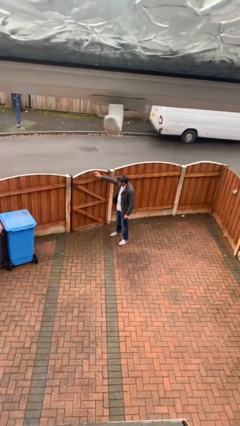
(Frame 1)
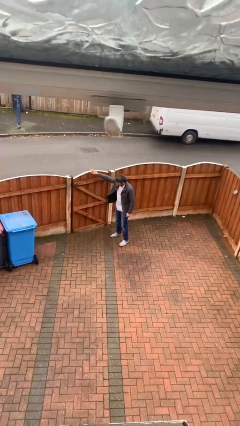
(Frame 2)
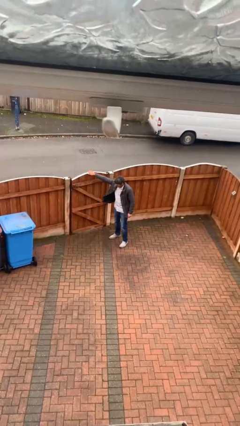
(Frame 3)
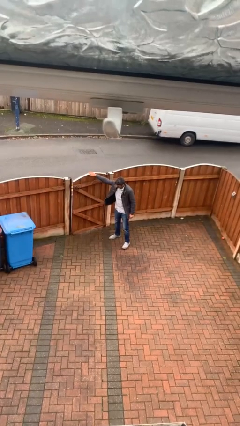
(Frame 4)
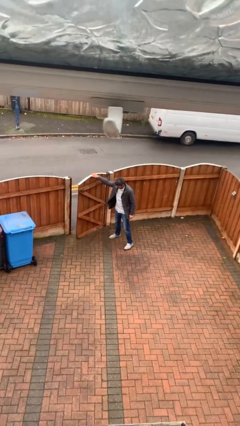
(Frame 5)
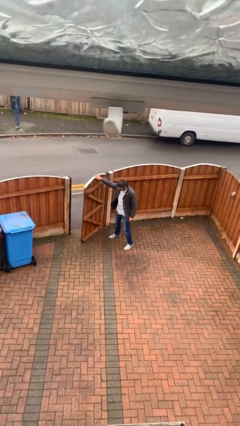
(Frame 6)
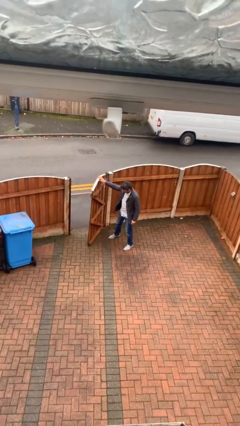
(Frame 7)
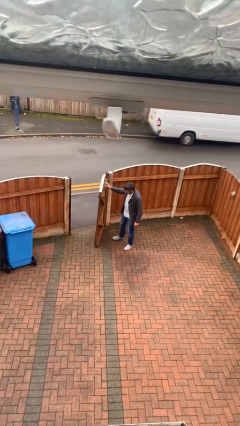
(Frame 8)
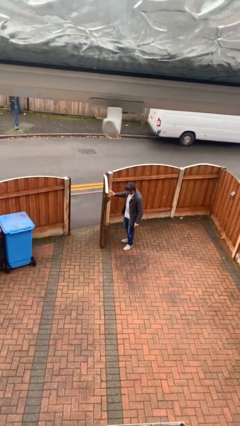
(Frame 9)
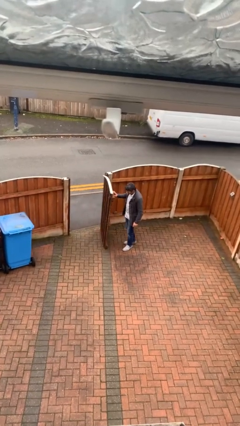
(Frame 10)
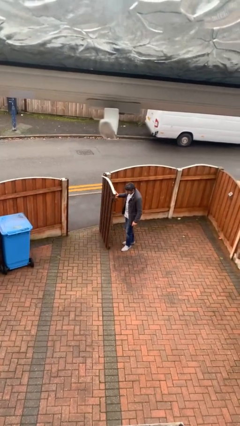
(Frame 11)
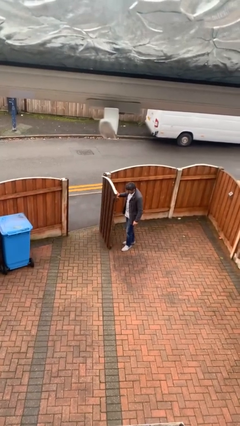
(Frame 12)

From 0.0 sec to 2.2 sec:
person opens facility door

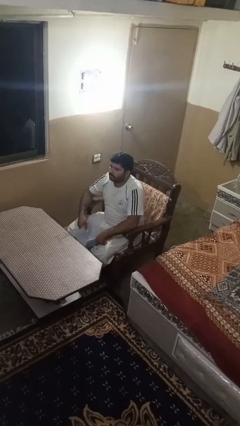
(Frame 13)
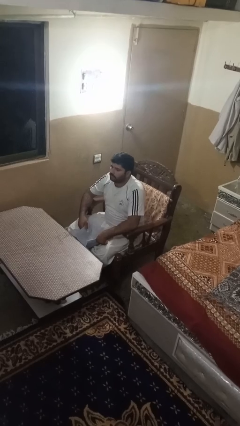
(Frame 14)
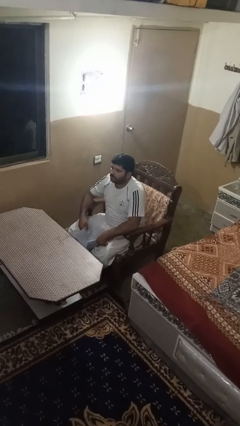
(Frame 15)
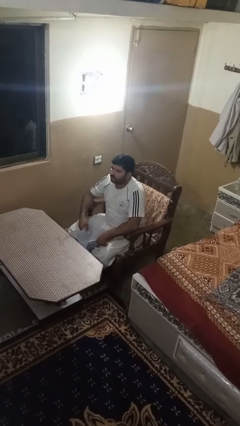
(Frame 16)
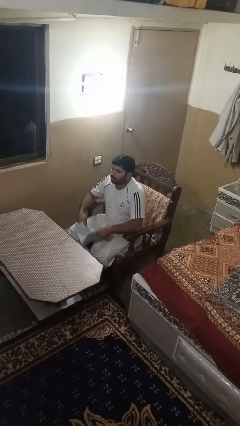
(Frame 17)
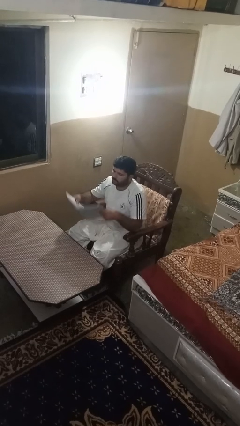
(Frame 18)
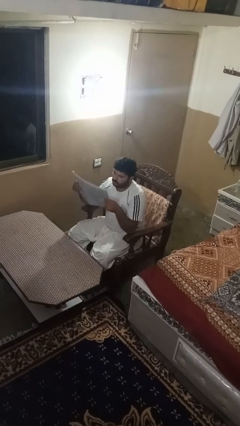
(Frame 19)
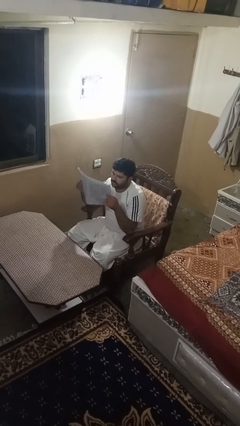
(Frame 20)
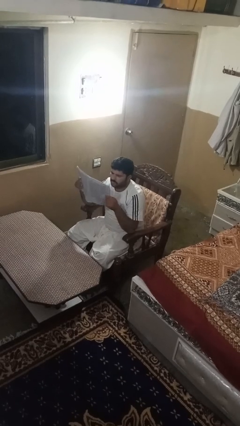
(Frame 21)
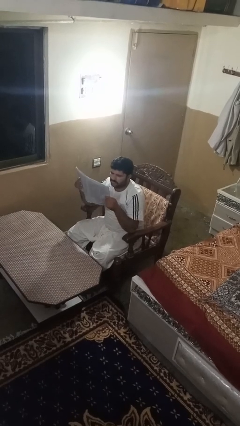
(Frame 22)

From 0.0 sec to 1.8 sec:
person reads newspaper

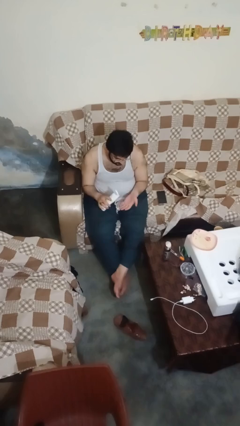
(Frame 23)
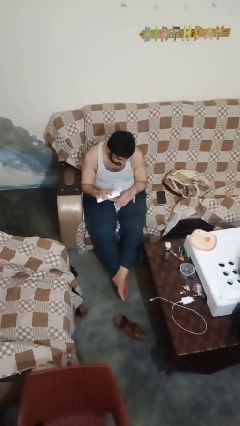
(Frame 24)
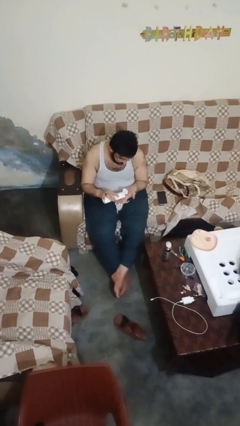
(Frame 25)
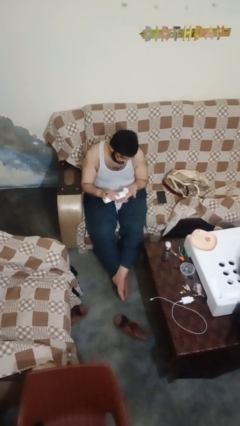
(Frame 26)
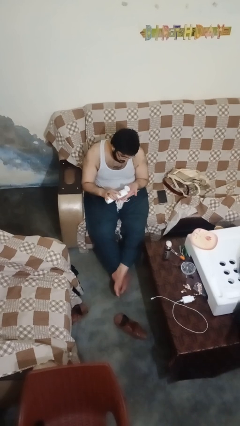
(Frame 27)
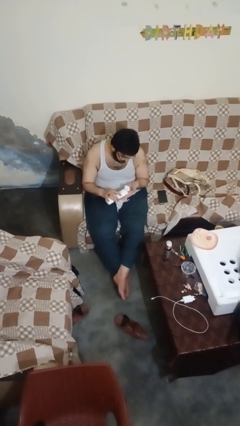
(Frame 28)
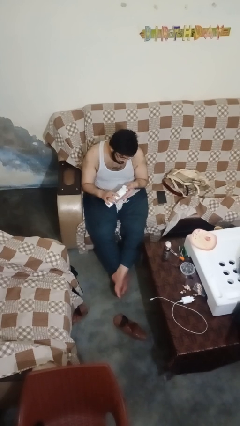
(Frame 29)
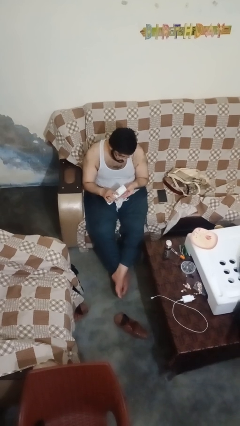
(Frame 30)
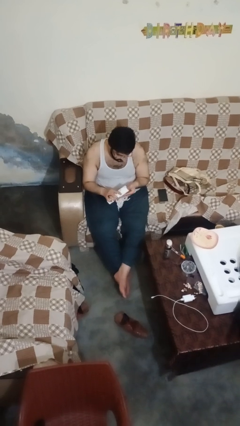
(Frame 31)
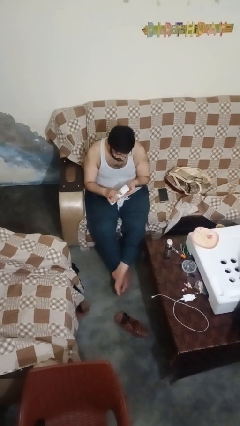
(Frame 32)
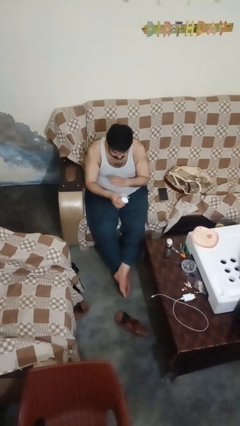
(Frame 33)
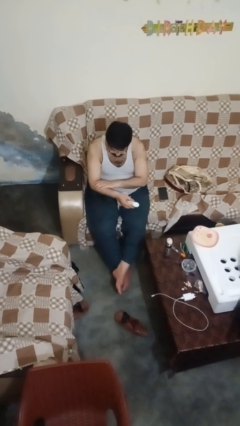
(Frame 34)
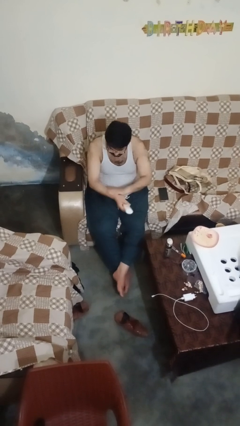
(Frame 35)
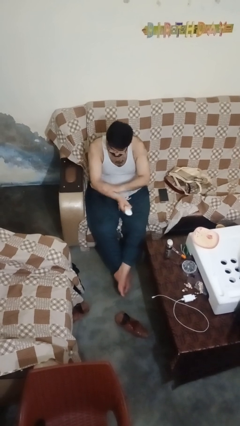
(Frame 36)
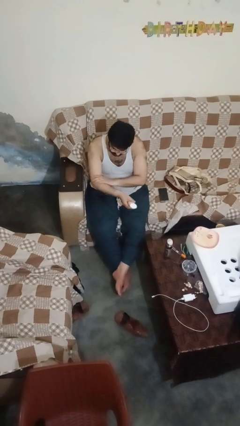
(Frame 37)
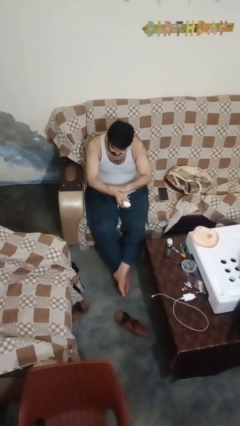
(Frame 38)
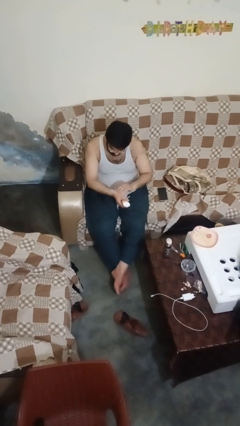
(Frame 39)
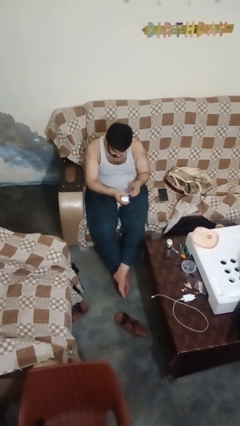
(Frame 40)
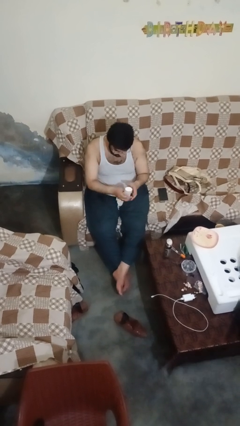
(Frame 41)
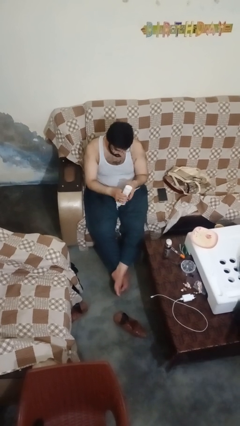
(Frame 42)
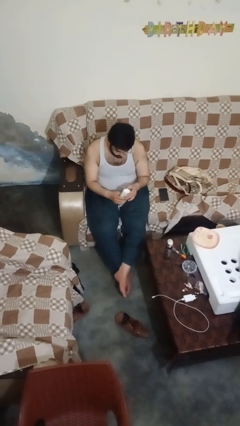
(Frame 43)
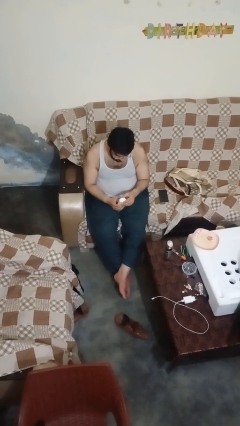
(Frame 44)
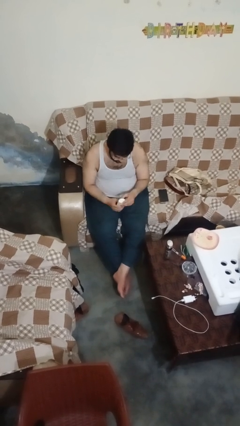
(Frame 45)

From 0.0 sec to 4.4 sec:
person applies sunscreen

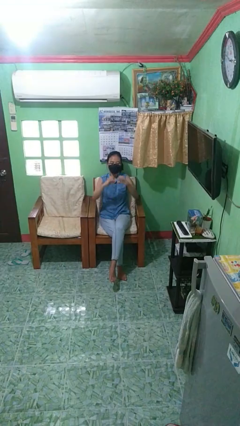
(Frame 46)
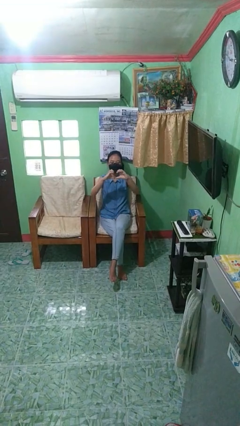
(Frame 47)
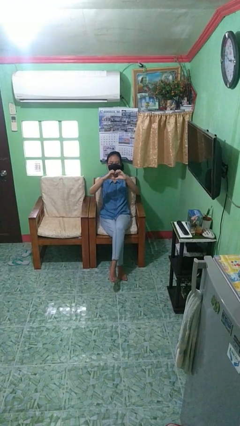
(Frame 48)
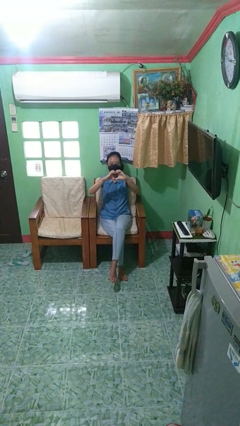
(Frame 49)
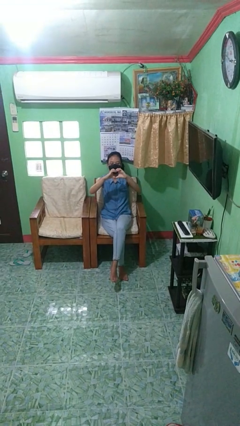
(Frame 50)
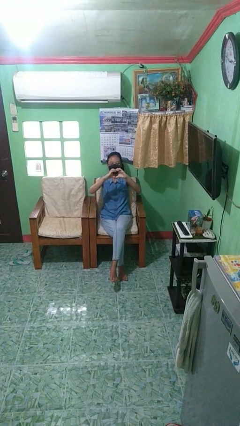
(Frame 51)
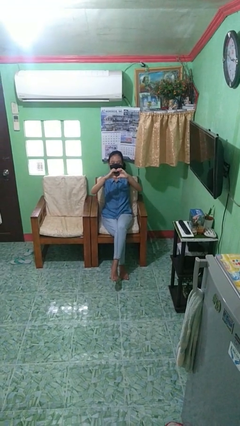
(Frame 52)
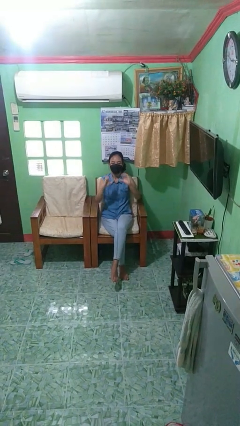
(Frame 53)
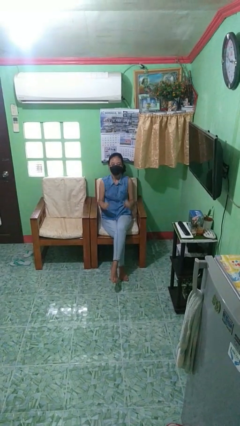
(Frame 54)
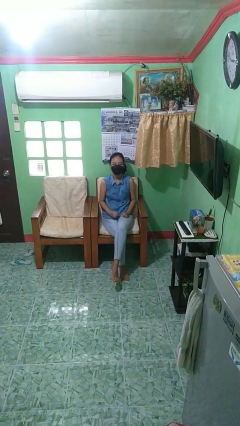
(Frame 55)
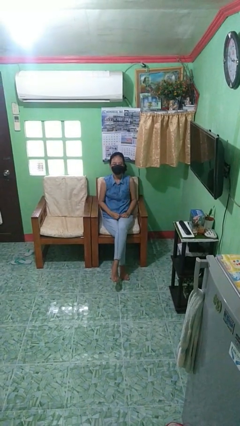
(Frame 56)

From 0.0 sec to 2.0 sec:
person gestures heart

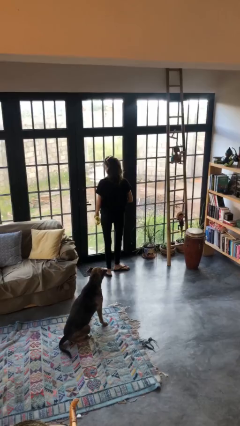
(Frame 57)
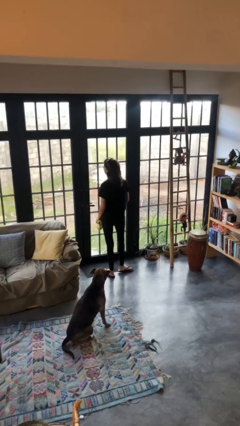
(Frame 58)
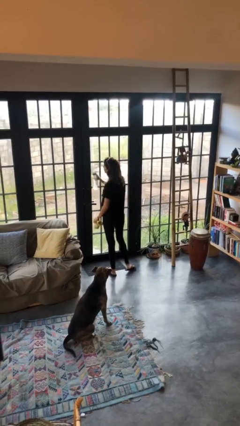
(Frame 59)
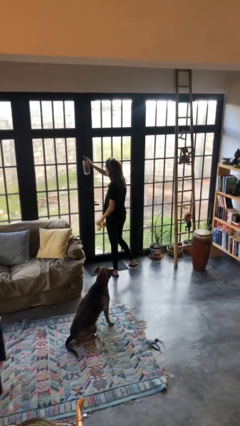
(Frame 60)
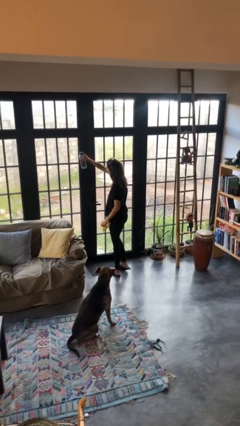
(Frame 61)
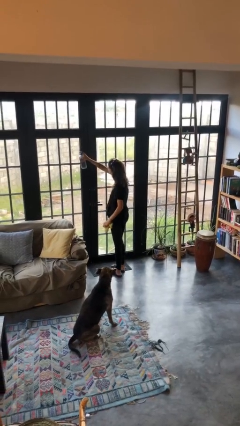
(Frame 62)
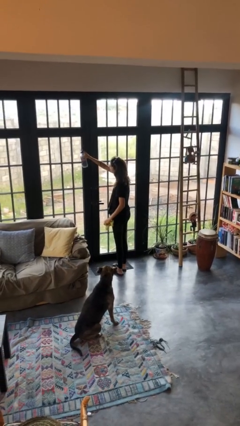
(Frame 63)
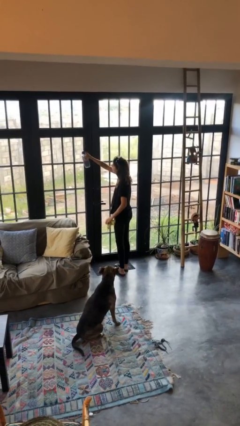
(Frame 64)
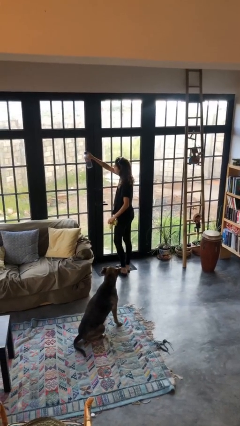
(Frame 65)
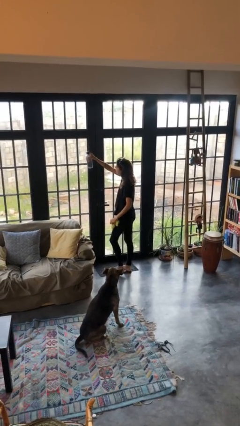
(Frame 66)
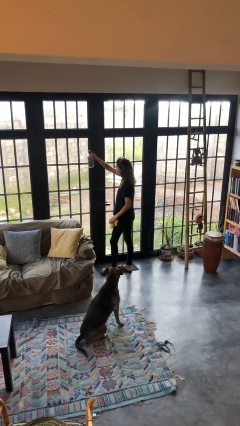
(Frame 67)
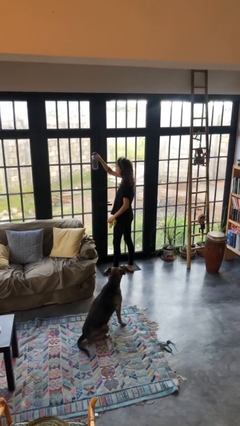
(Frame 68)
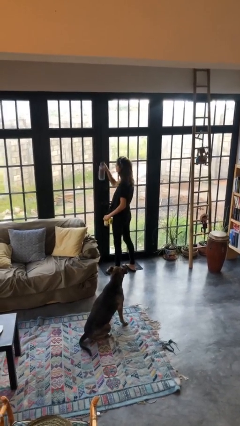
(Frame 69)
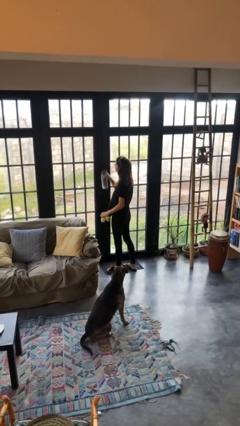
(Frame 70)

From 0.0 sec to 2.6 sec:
person sprays from bottle

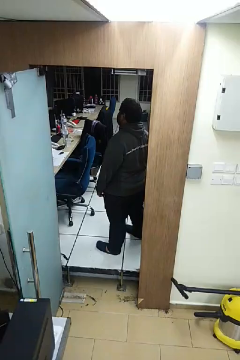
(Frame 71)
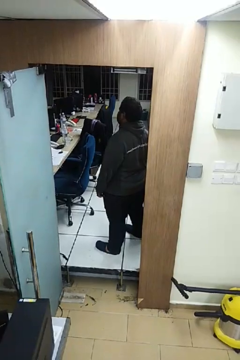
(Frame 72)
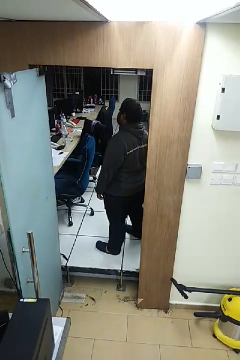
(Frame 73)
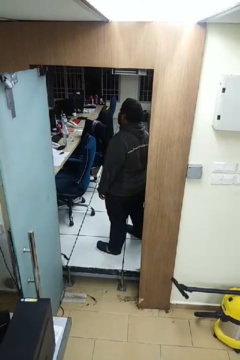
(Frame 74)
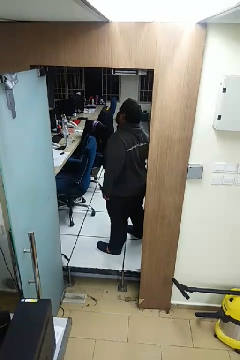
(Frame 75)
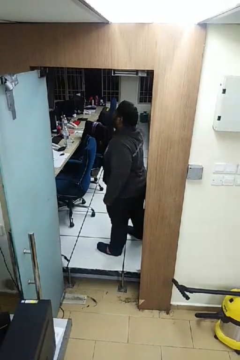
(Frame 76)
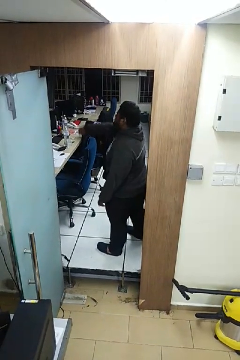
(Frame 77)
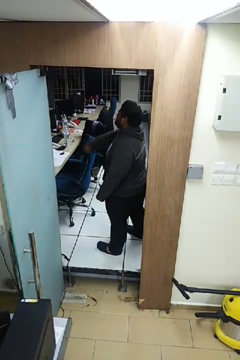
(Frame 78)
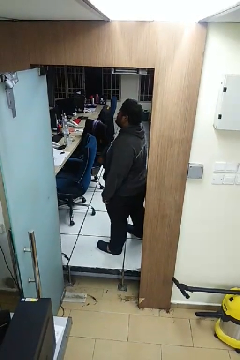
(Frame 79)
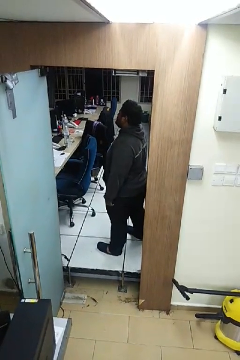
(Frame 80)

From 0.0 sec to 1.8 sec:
person punches

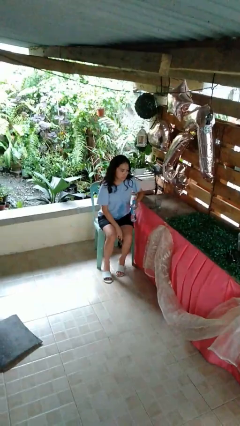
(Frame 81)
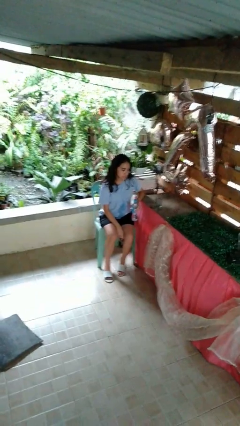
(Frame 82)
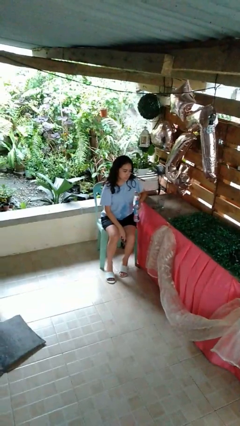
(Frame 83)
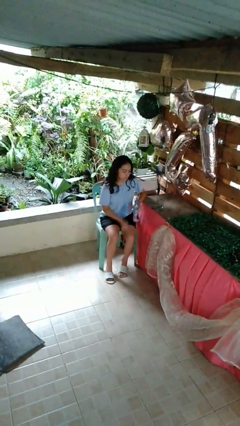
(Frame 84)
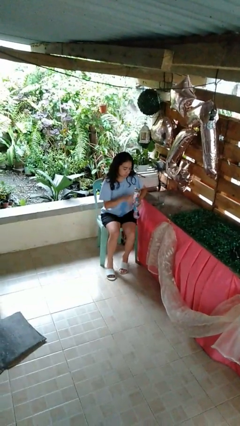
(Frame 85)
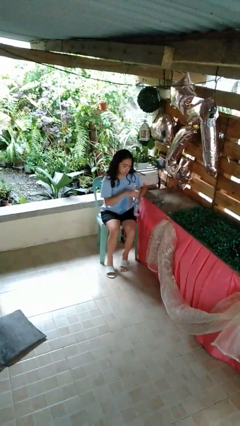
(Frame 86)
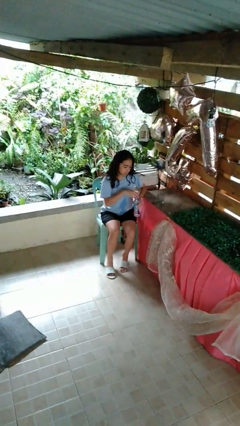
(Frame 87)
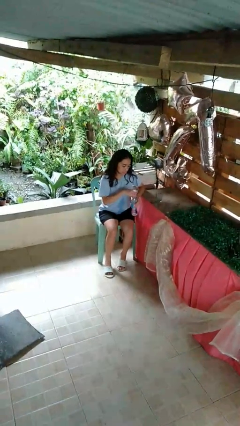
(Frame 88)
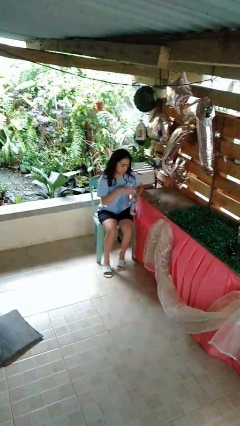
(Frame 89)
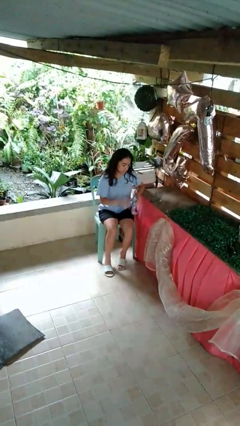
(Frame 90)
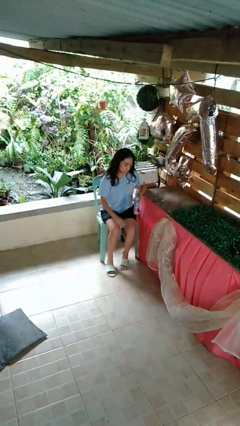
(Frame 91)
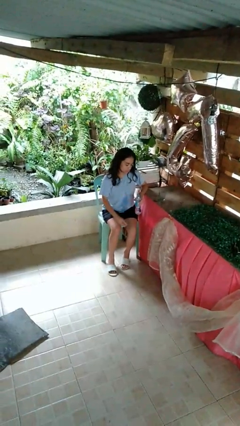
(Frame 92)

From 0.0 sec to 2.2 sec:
person unscrews lid from bottle

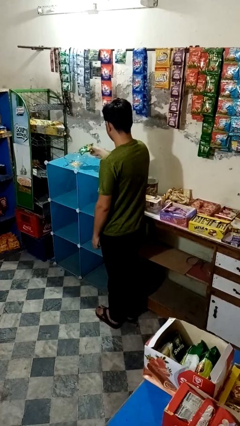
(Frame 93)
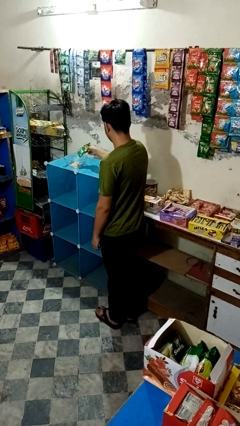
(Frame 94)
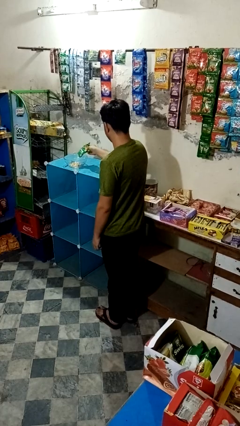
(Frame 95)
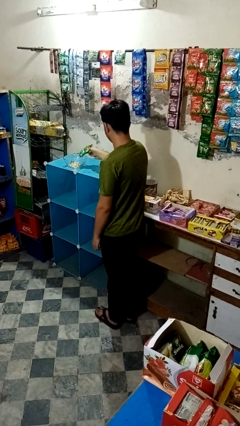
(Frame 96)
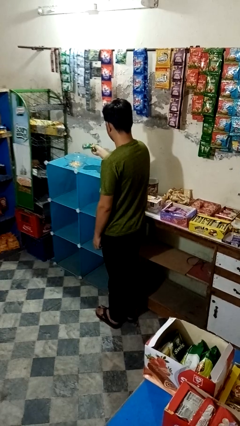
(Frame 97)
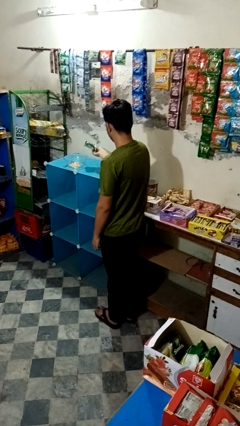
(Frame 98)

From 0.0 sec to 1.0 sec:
person pours into bowl
